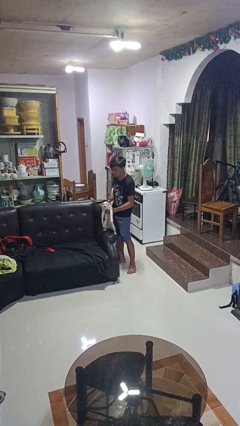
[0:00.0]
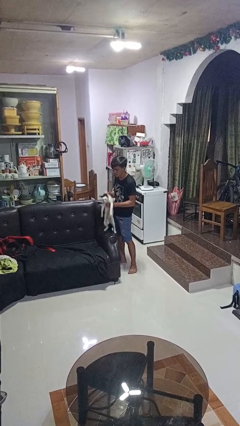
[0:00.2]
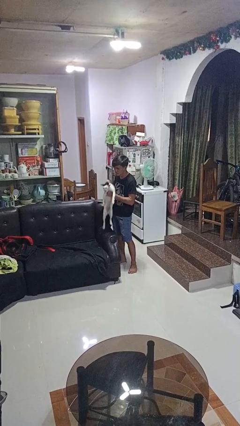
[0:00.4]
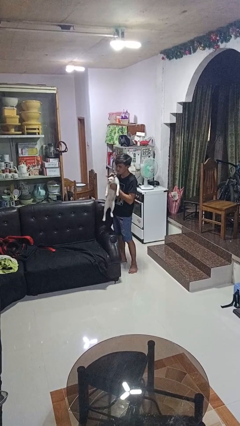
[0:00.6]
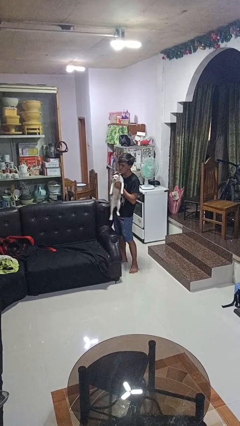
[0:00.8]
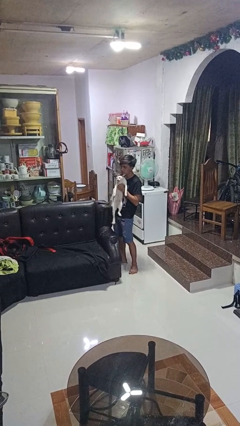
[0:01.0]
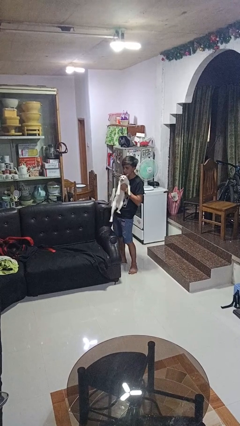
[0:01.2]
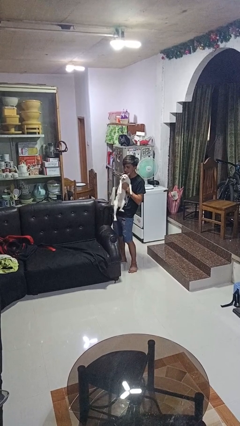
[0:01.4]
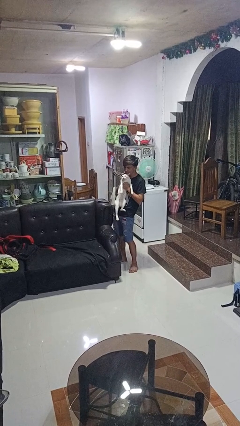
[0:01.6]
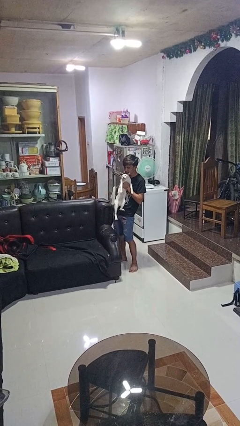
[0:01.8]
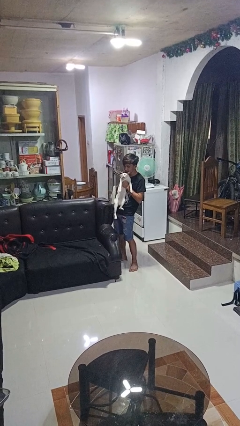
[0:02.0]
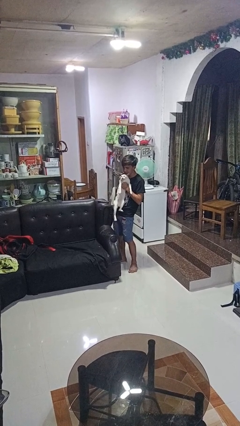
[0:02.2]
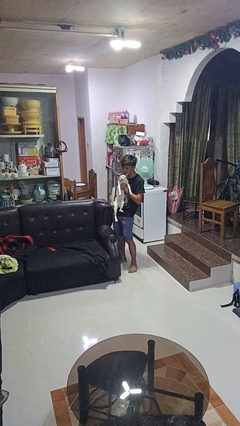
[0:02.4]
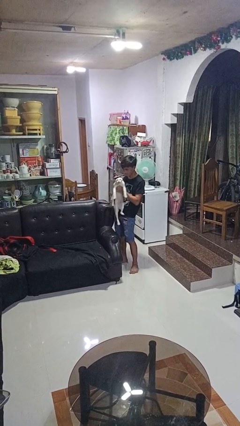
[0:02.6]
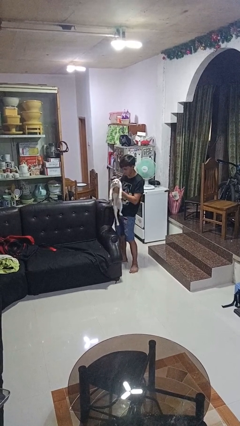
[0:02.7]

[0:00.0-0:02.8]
person hugs cat

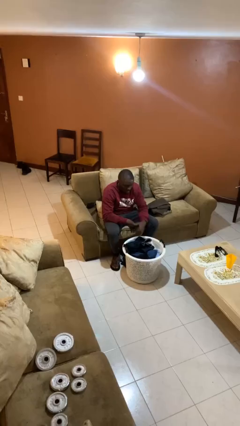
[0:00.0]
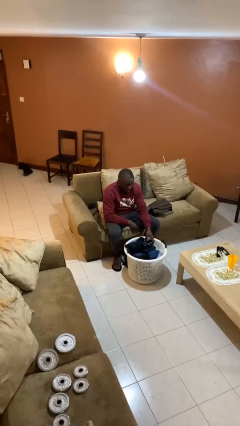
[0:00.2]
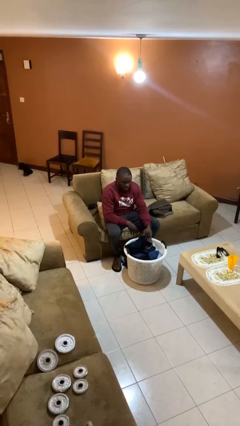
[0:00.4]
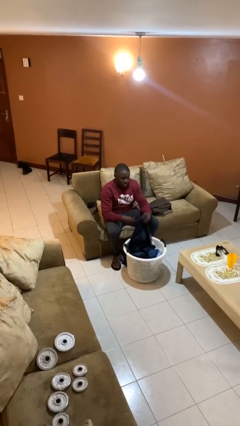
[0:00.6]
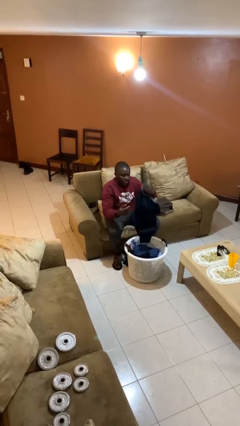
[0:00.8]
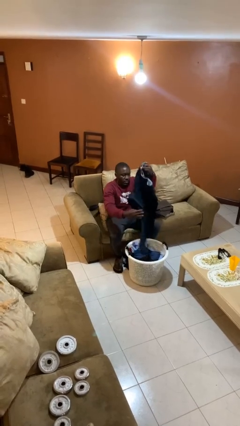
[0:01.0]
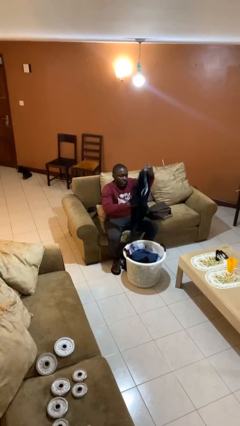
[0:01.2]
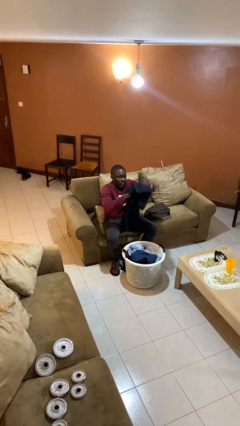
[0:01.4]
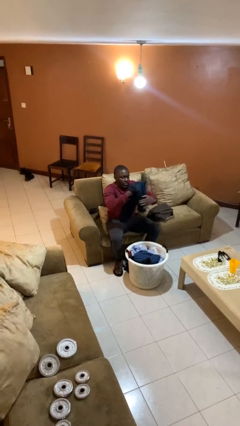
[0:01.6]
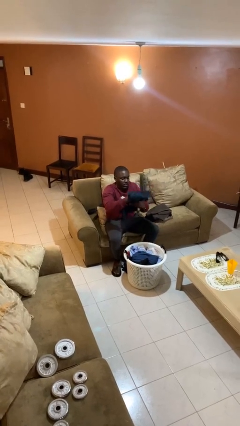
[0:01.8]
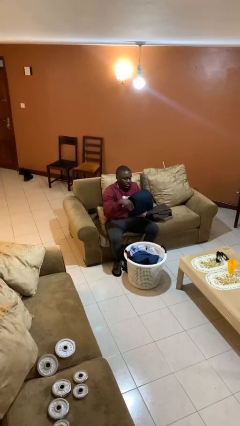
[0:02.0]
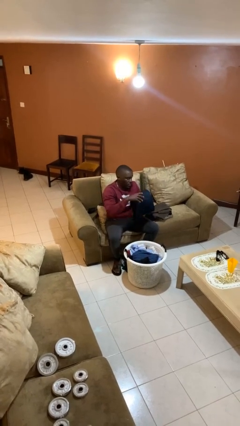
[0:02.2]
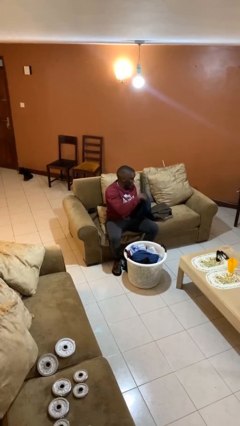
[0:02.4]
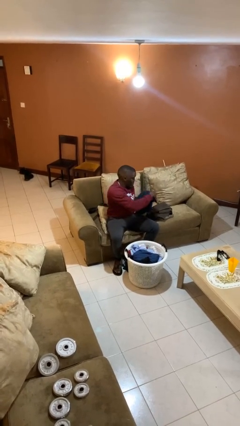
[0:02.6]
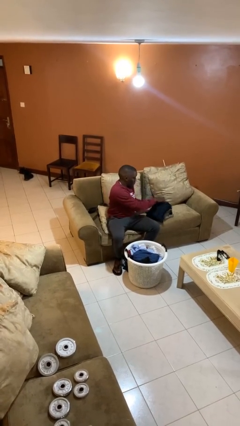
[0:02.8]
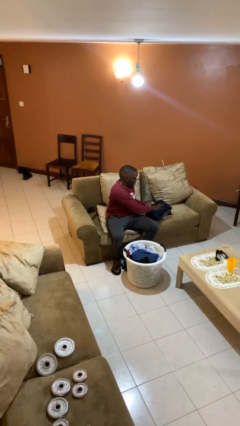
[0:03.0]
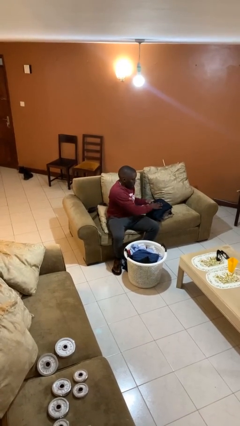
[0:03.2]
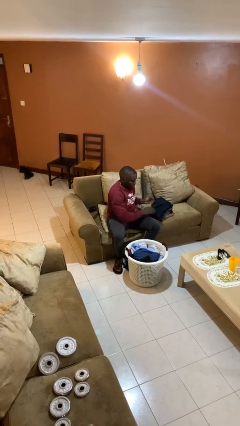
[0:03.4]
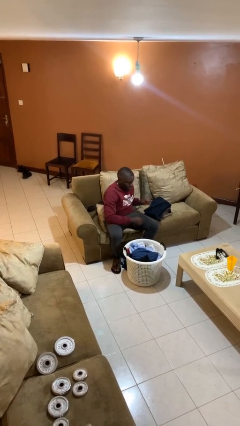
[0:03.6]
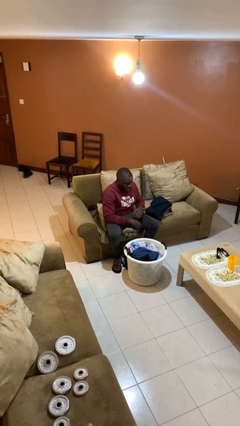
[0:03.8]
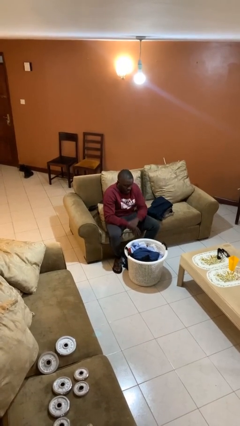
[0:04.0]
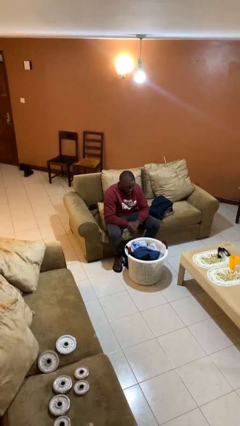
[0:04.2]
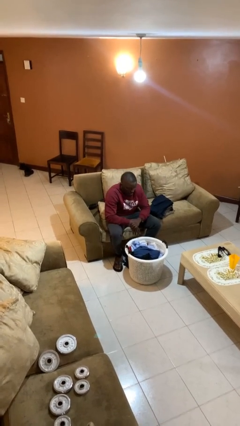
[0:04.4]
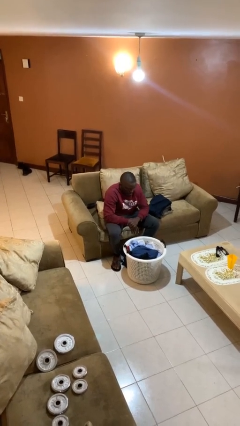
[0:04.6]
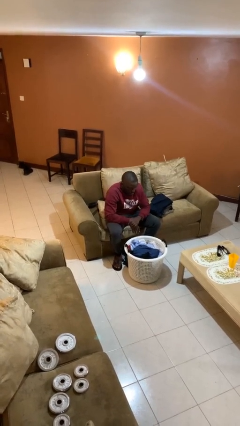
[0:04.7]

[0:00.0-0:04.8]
person folds pants

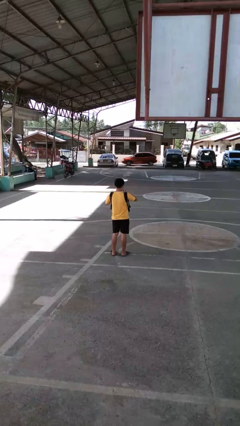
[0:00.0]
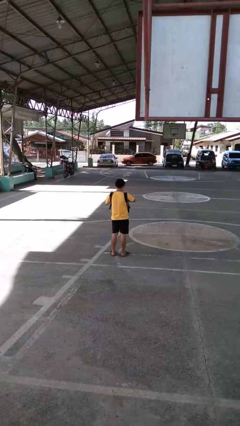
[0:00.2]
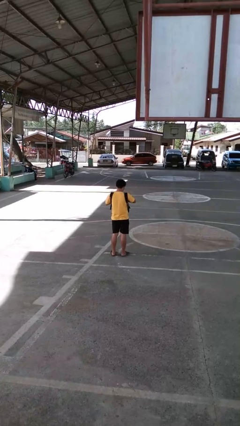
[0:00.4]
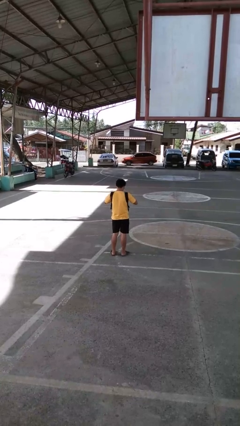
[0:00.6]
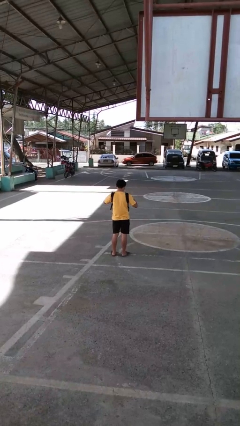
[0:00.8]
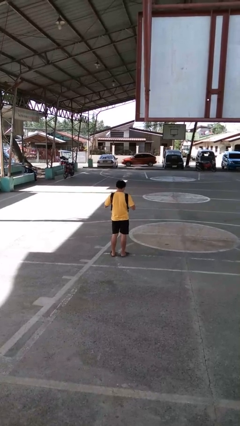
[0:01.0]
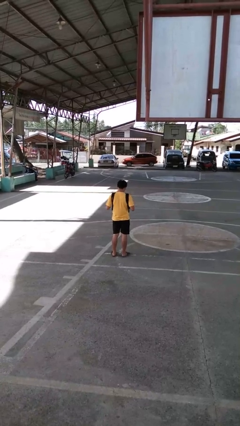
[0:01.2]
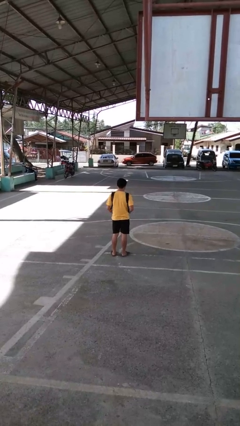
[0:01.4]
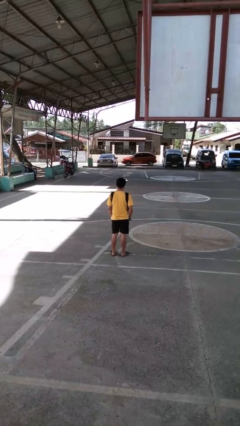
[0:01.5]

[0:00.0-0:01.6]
person puts object into backpack

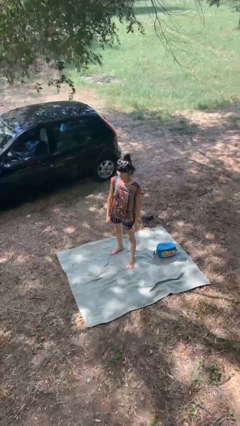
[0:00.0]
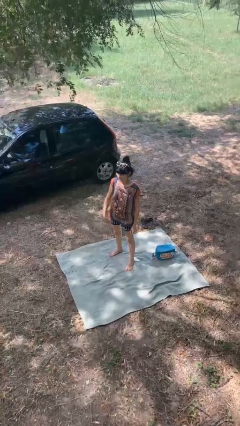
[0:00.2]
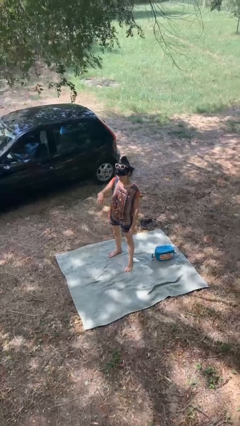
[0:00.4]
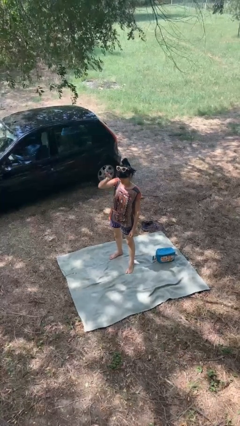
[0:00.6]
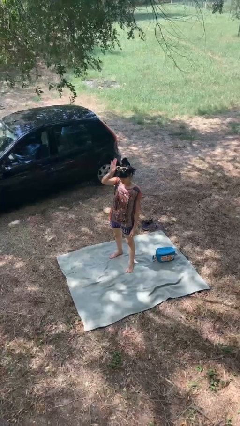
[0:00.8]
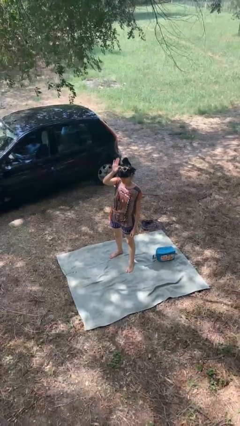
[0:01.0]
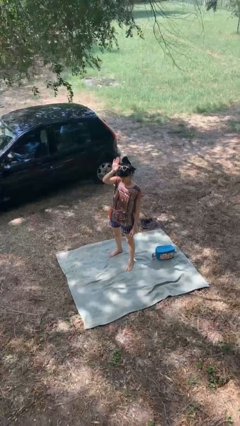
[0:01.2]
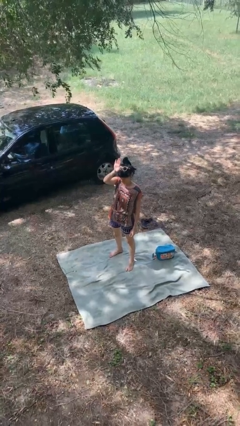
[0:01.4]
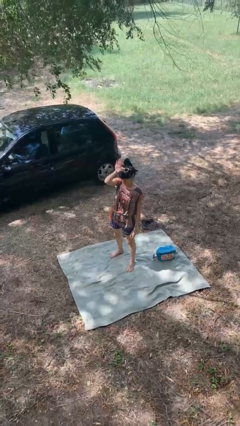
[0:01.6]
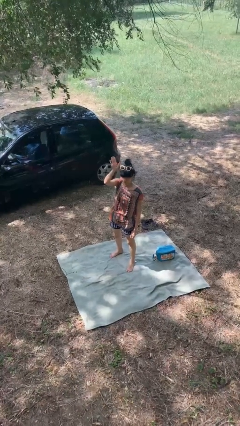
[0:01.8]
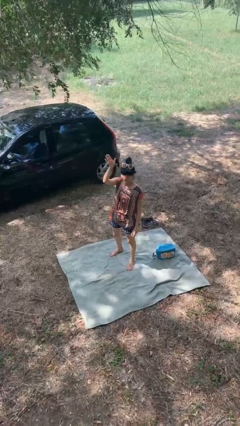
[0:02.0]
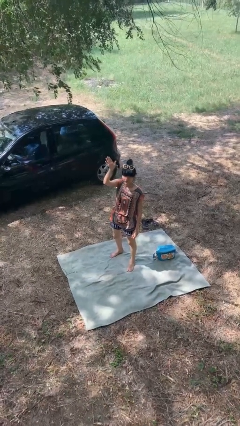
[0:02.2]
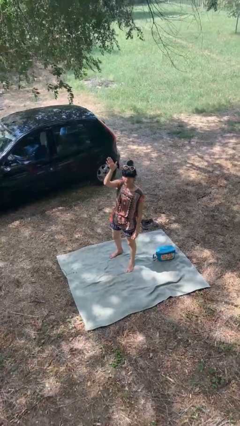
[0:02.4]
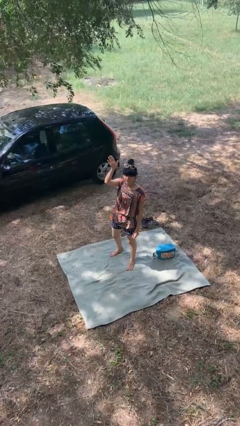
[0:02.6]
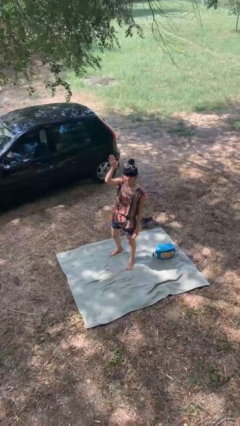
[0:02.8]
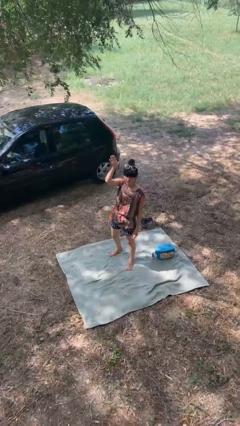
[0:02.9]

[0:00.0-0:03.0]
person gestures raise hand

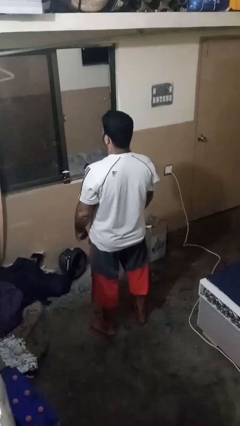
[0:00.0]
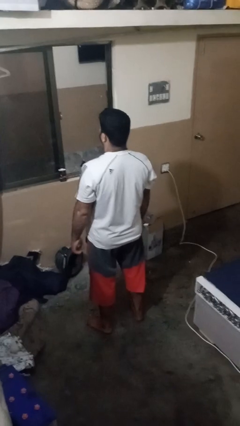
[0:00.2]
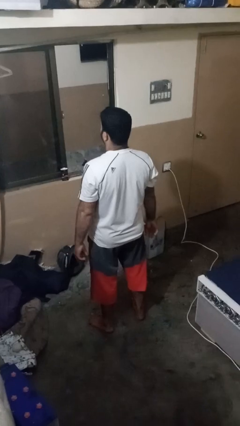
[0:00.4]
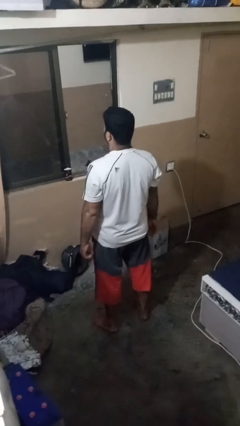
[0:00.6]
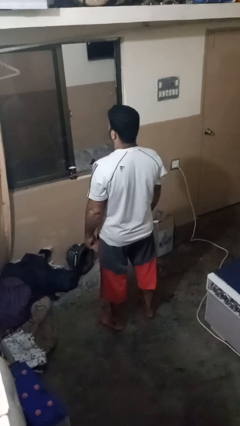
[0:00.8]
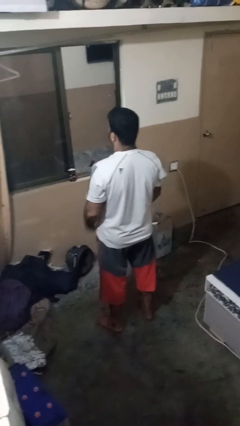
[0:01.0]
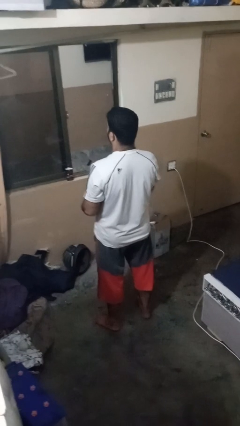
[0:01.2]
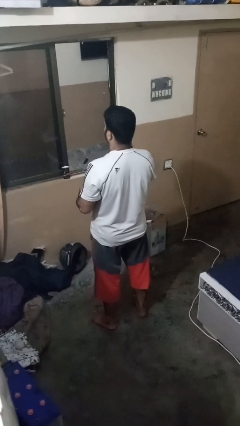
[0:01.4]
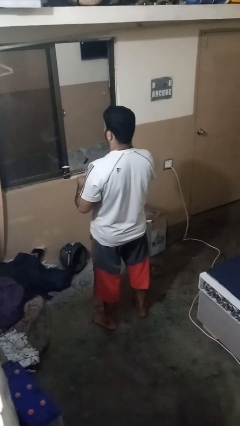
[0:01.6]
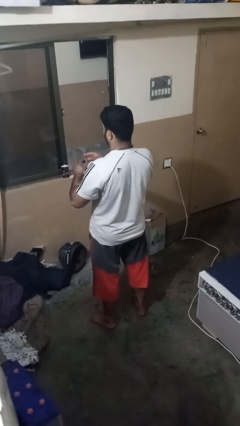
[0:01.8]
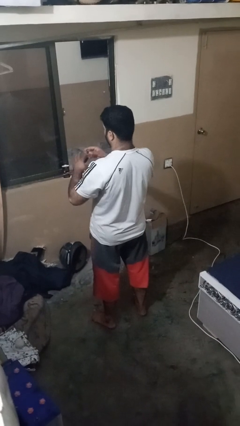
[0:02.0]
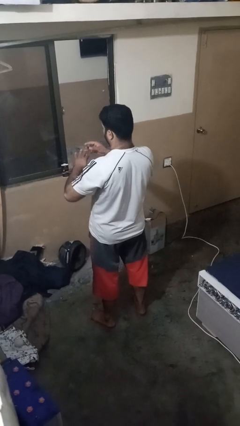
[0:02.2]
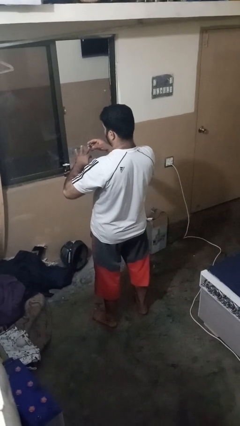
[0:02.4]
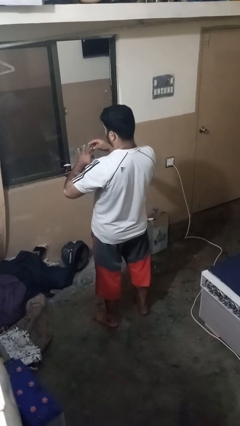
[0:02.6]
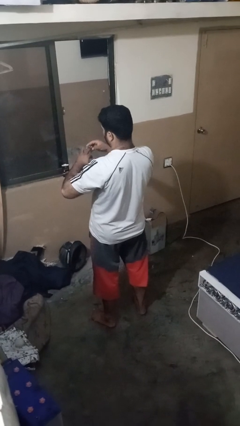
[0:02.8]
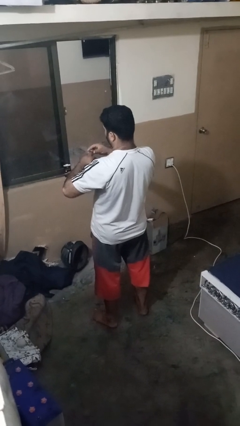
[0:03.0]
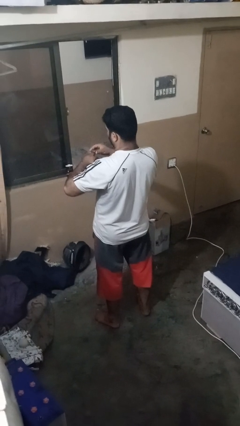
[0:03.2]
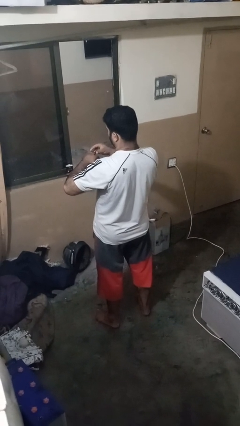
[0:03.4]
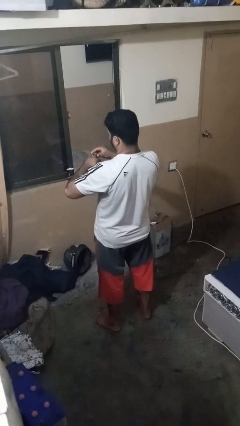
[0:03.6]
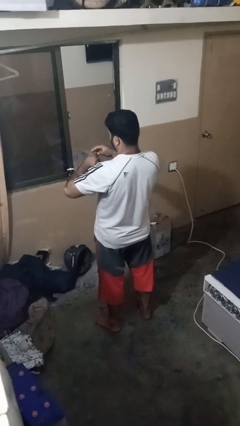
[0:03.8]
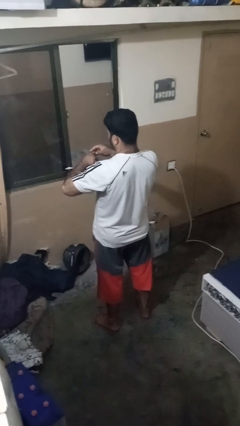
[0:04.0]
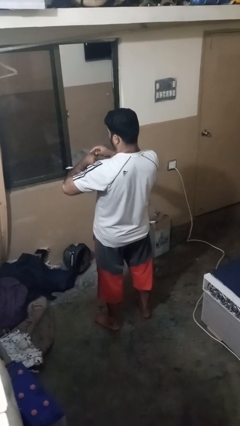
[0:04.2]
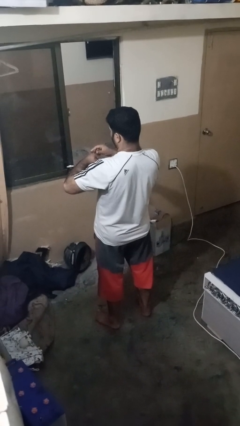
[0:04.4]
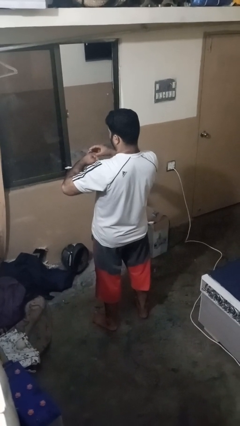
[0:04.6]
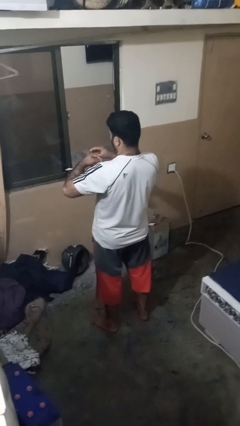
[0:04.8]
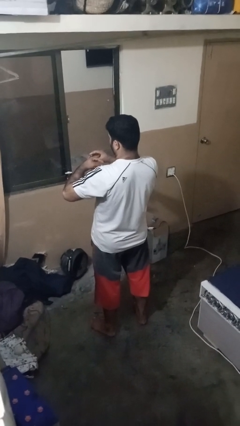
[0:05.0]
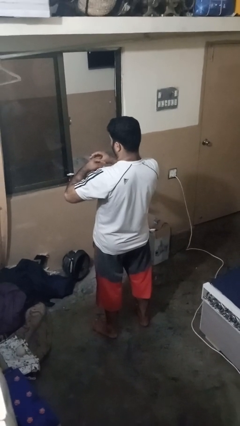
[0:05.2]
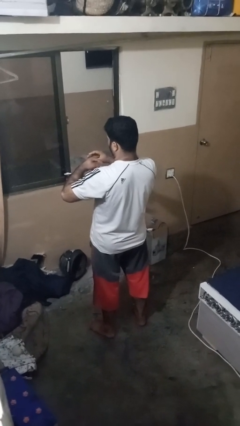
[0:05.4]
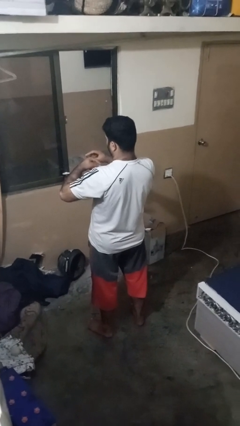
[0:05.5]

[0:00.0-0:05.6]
person puts on ring
